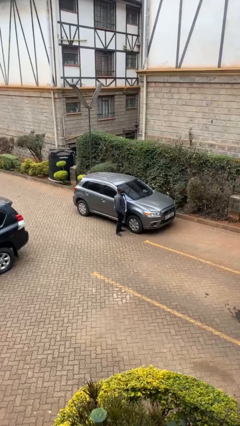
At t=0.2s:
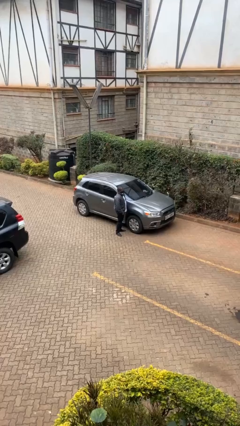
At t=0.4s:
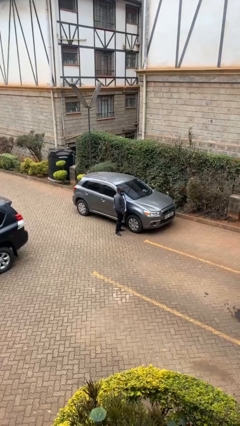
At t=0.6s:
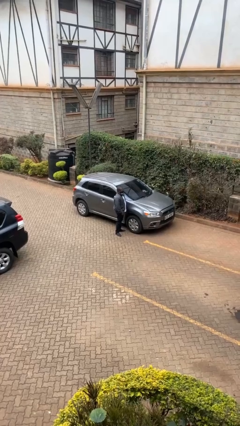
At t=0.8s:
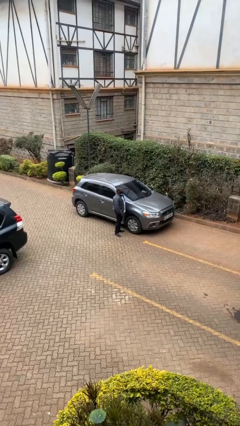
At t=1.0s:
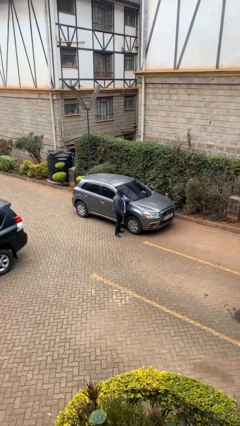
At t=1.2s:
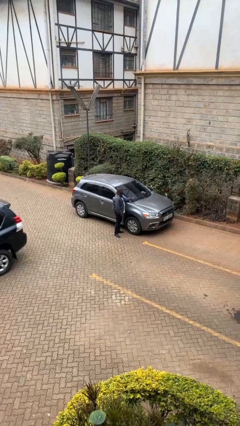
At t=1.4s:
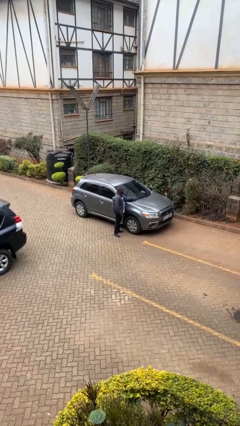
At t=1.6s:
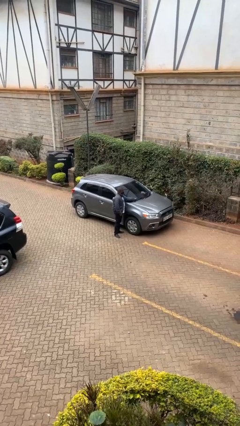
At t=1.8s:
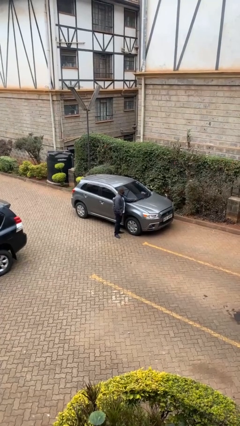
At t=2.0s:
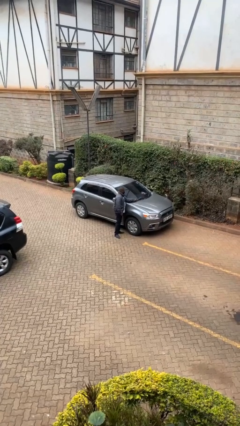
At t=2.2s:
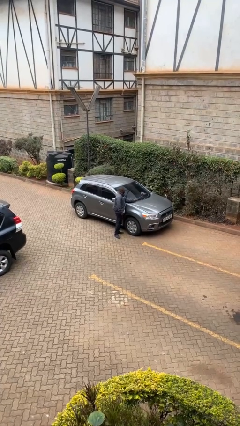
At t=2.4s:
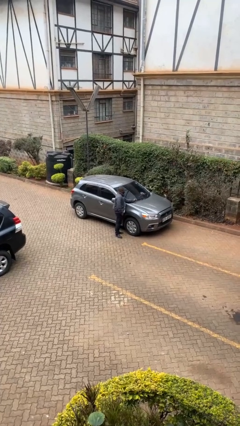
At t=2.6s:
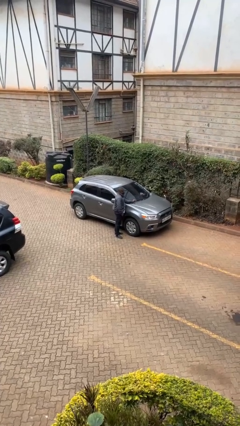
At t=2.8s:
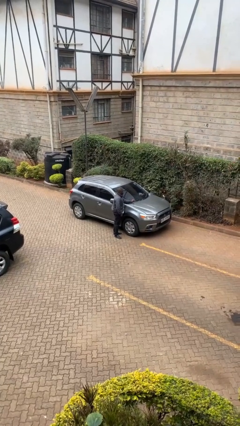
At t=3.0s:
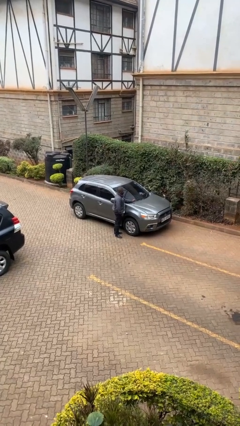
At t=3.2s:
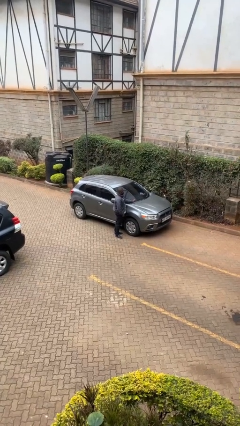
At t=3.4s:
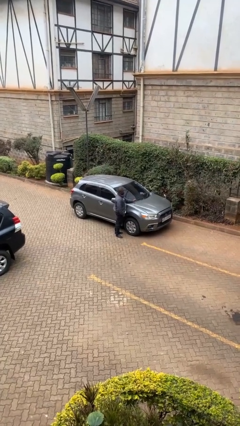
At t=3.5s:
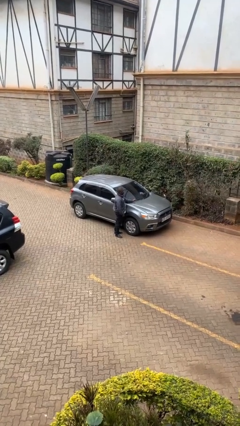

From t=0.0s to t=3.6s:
person flips up car wipers

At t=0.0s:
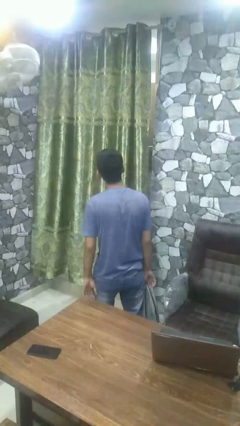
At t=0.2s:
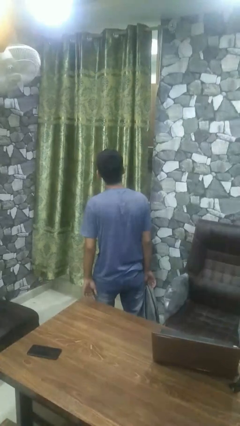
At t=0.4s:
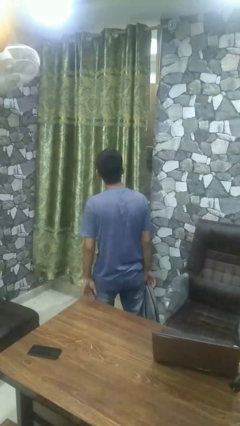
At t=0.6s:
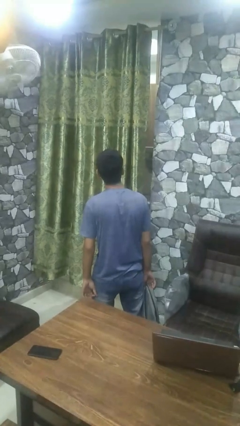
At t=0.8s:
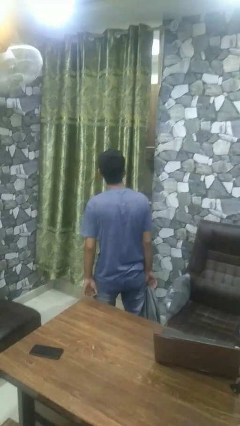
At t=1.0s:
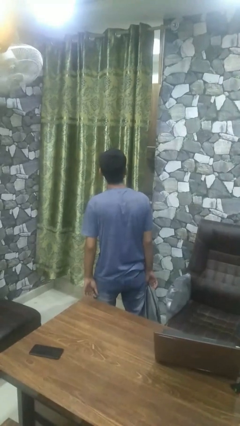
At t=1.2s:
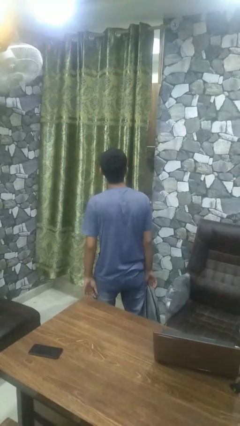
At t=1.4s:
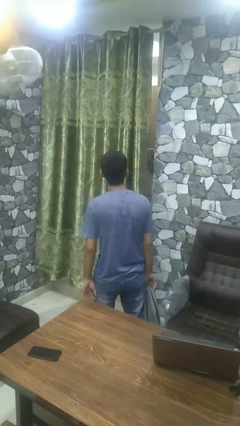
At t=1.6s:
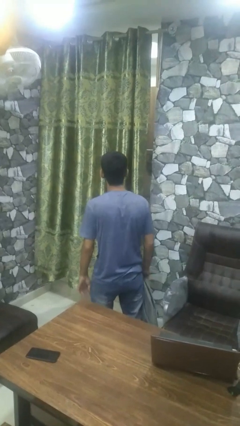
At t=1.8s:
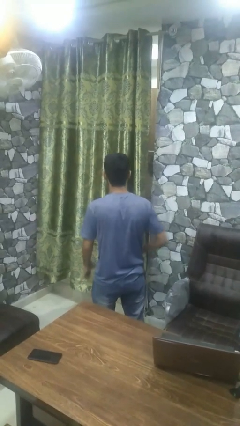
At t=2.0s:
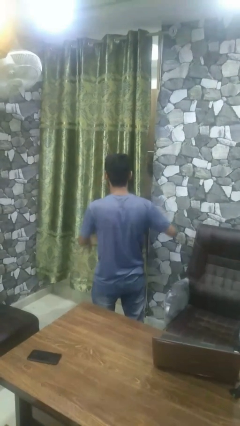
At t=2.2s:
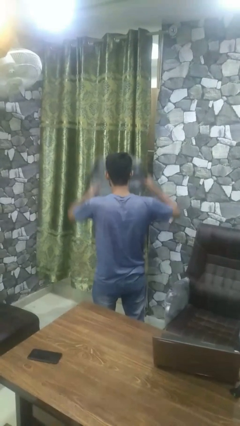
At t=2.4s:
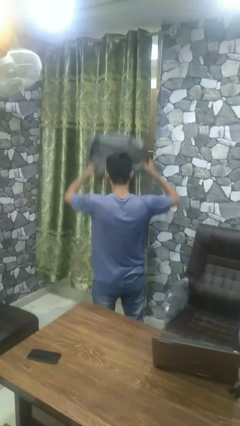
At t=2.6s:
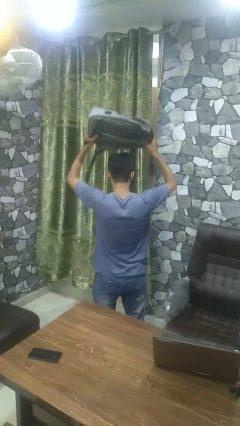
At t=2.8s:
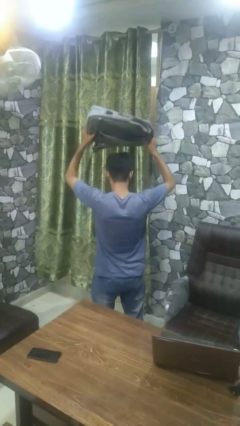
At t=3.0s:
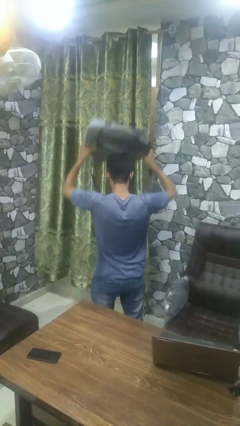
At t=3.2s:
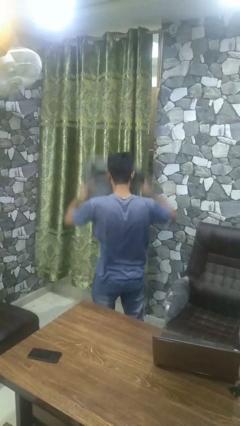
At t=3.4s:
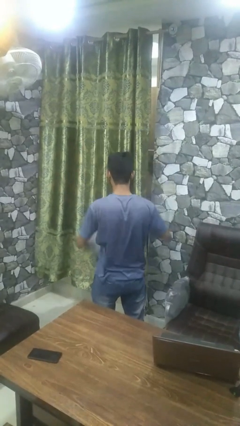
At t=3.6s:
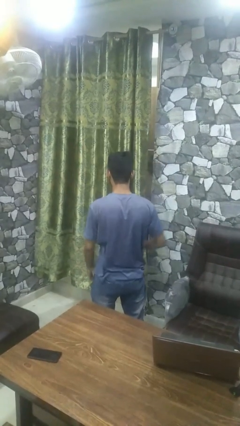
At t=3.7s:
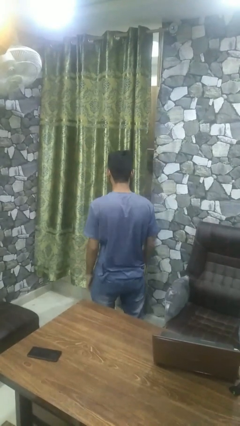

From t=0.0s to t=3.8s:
person holds object above head

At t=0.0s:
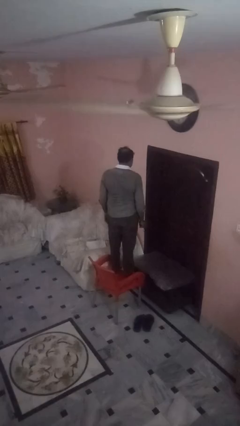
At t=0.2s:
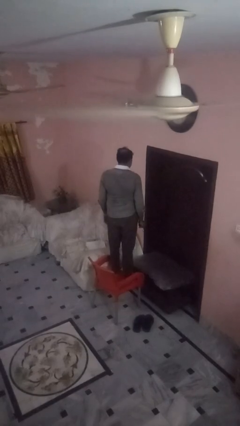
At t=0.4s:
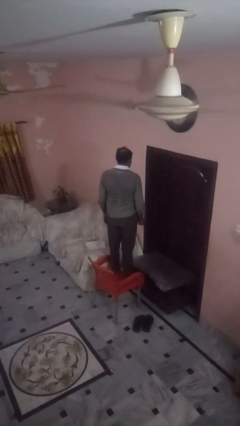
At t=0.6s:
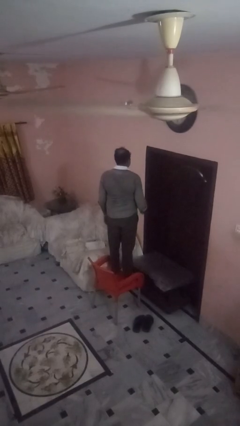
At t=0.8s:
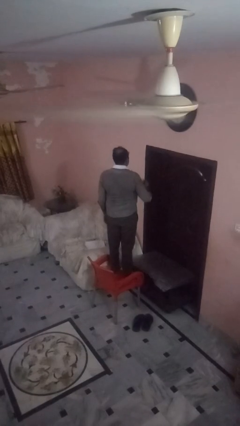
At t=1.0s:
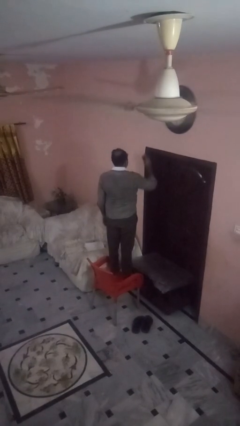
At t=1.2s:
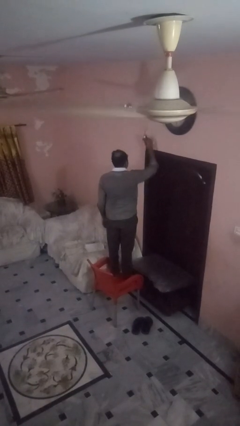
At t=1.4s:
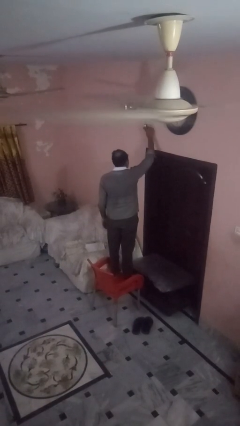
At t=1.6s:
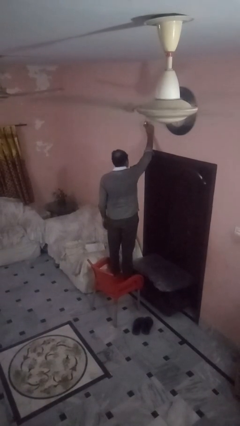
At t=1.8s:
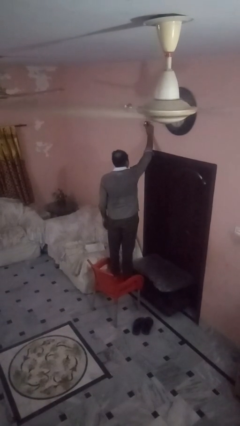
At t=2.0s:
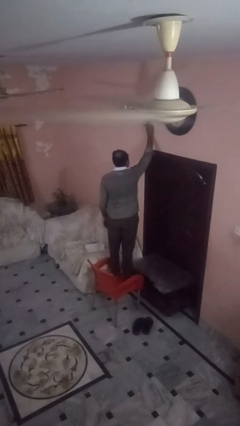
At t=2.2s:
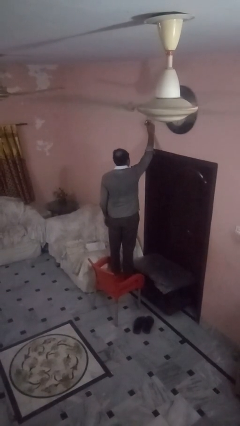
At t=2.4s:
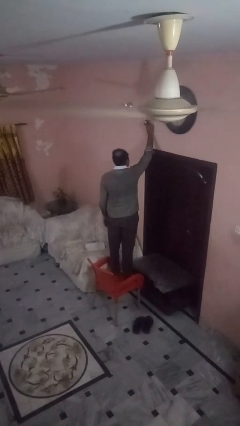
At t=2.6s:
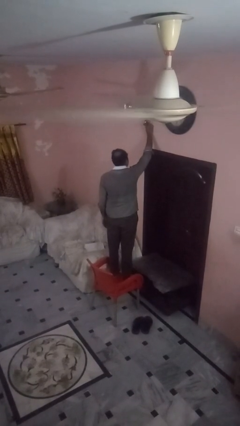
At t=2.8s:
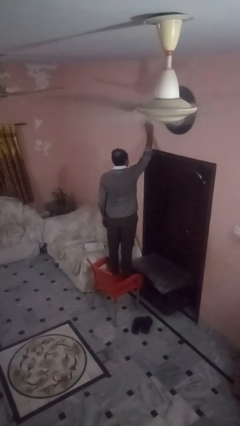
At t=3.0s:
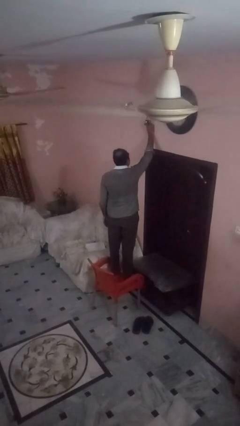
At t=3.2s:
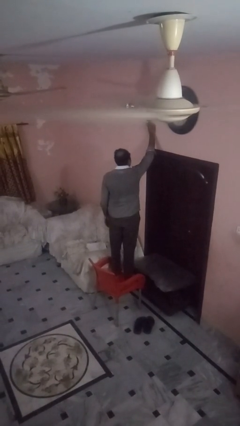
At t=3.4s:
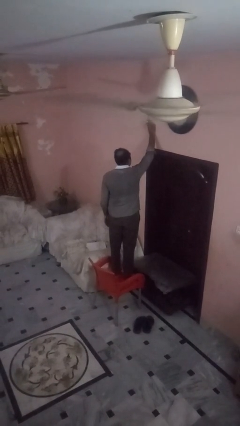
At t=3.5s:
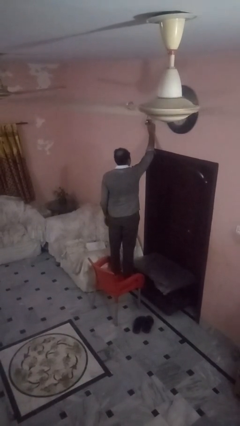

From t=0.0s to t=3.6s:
person puts up smoke detector

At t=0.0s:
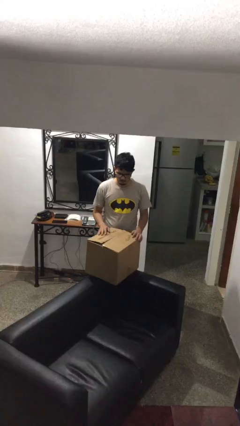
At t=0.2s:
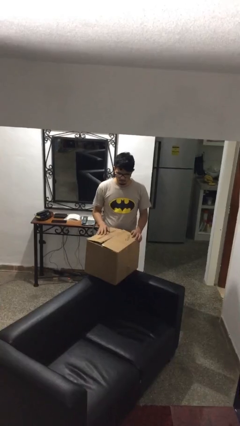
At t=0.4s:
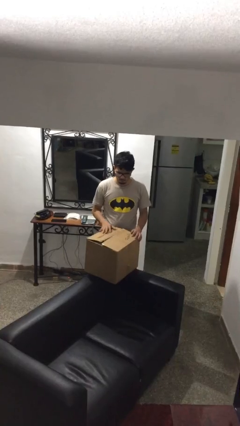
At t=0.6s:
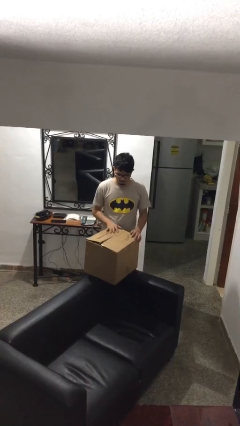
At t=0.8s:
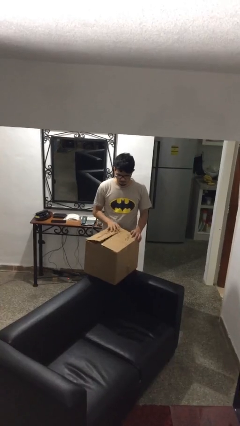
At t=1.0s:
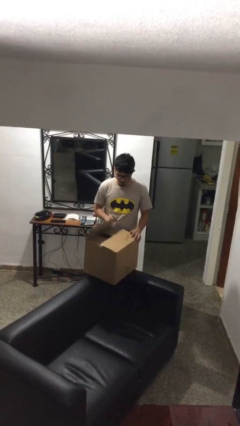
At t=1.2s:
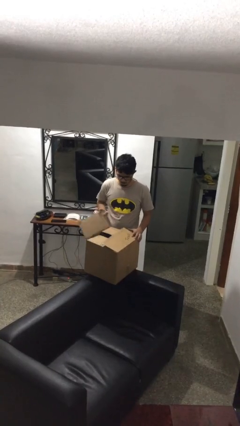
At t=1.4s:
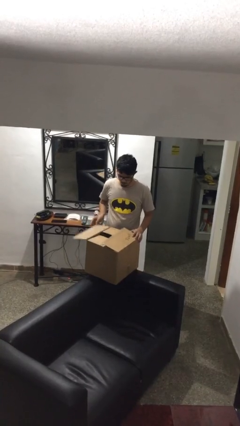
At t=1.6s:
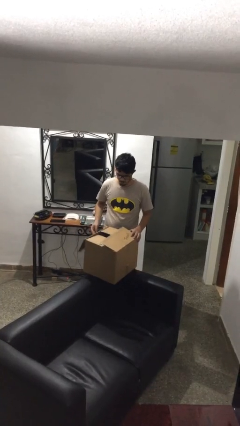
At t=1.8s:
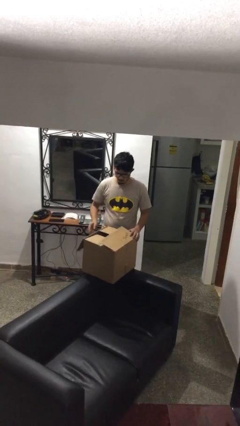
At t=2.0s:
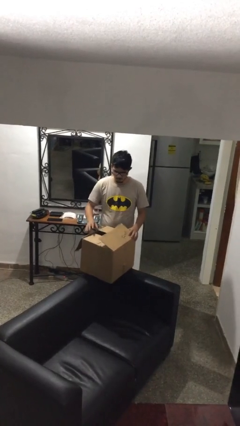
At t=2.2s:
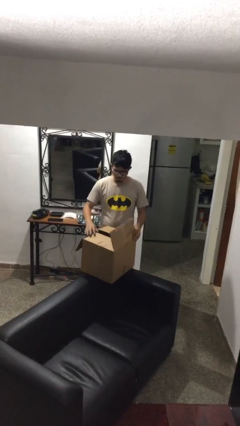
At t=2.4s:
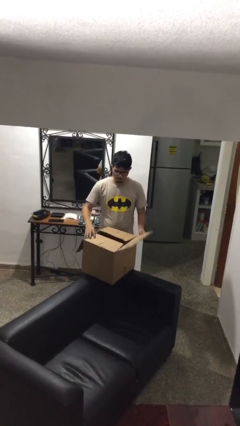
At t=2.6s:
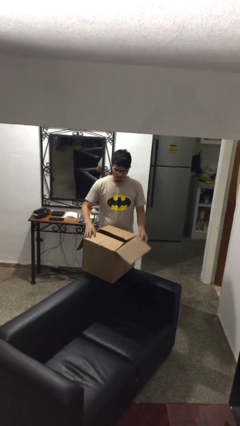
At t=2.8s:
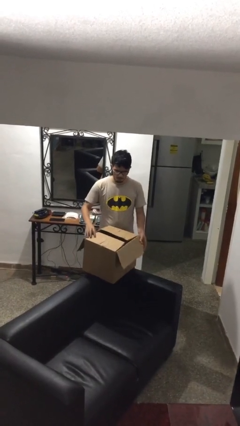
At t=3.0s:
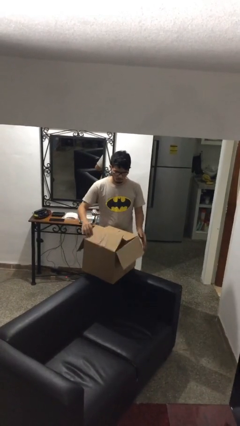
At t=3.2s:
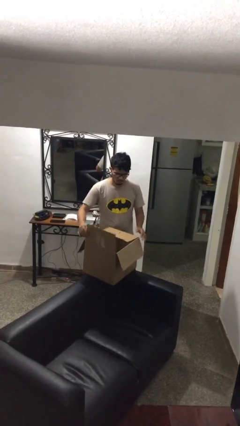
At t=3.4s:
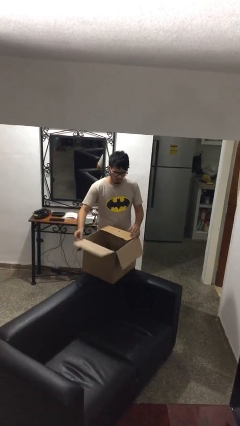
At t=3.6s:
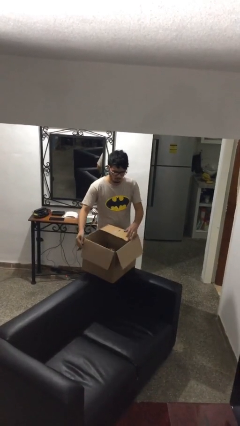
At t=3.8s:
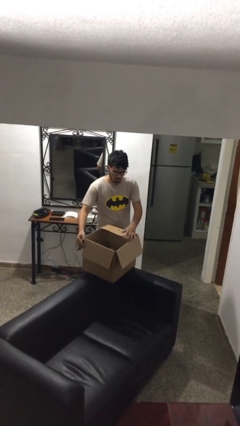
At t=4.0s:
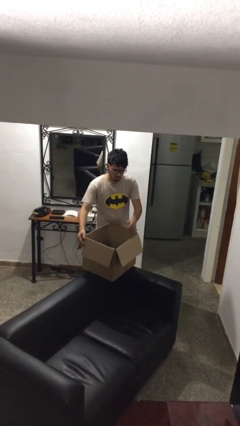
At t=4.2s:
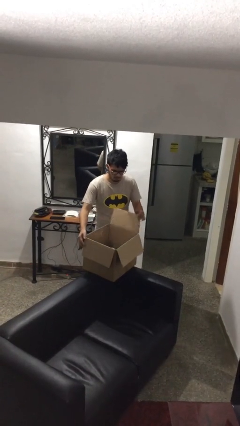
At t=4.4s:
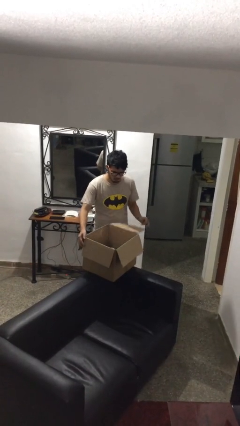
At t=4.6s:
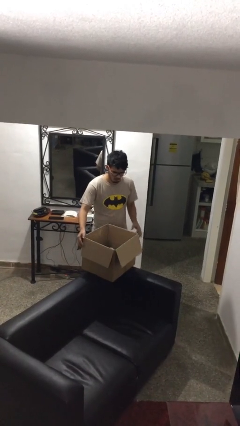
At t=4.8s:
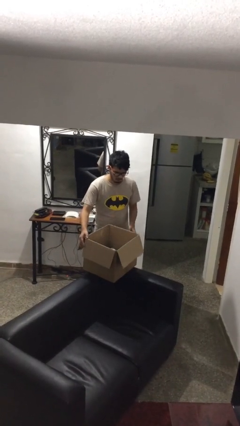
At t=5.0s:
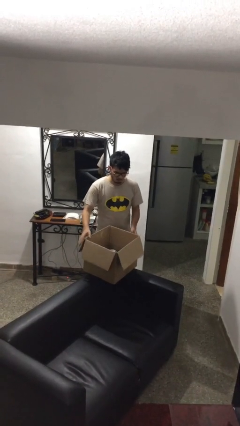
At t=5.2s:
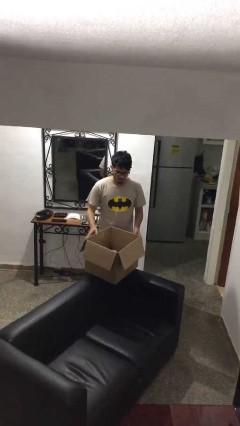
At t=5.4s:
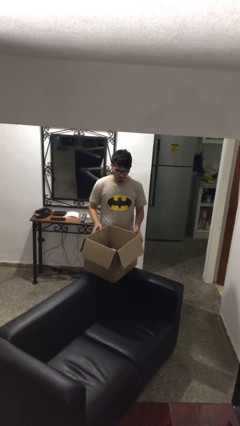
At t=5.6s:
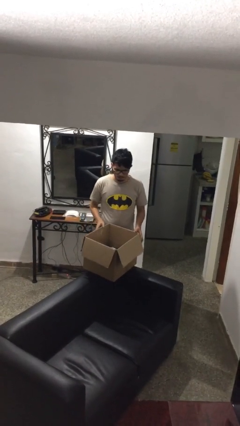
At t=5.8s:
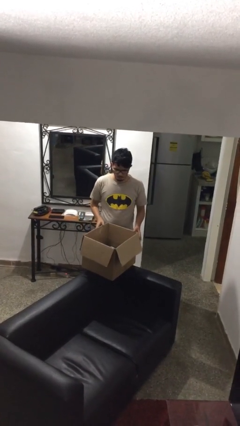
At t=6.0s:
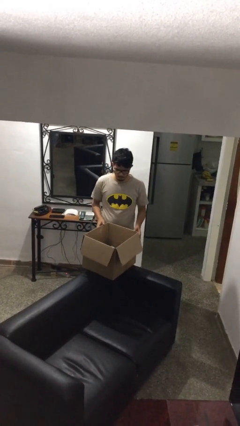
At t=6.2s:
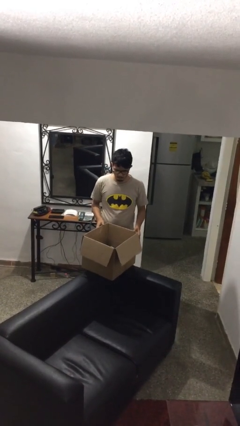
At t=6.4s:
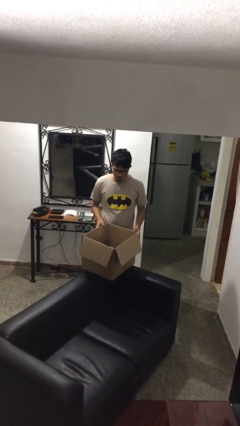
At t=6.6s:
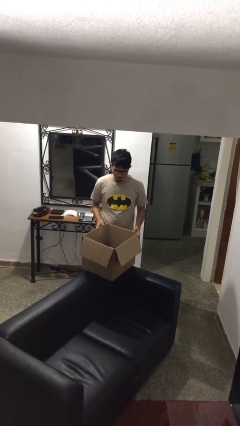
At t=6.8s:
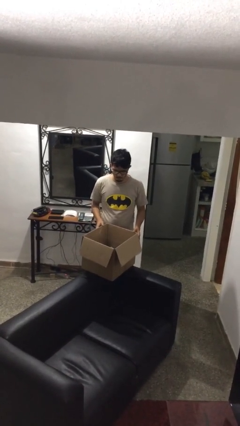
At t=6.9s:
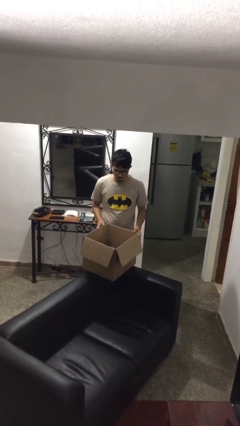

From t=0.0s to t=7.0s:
person opens box
